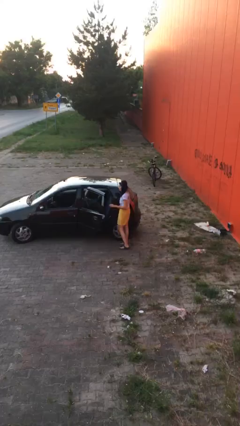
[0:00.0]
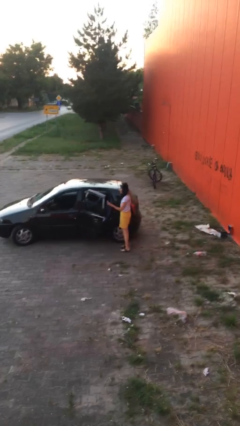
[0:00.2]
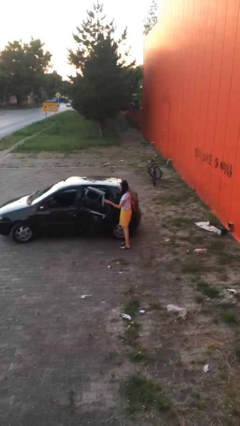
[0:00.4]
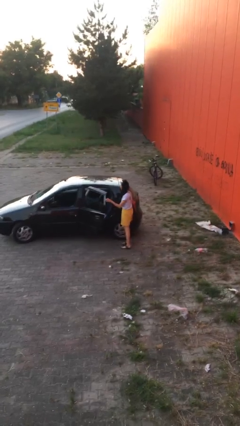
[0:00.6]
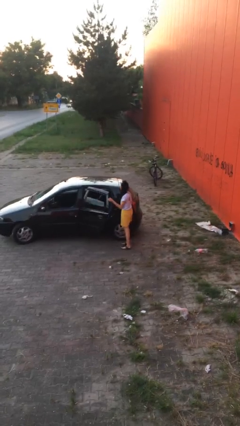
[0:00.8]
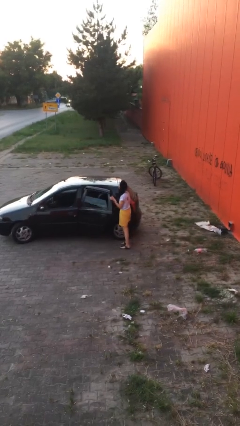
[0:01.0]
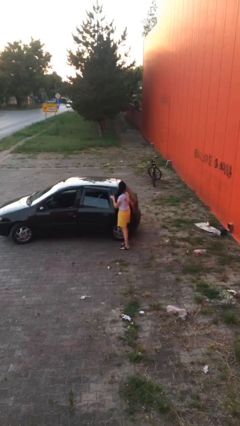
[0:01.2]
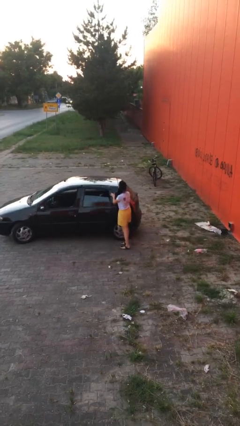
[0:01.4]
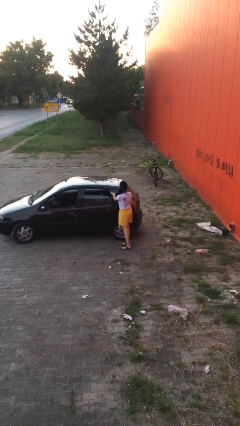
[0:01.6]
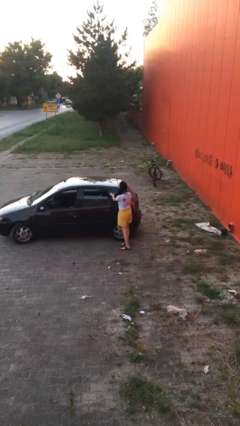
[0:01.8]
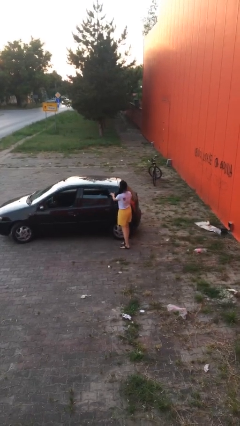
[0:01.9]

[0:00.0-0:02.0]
person closes car door

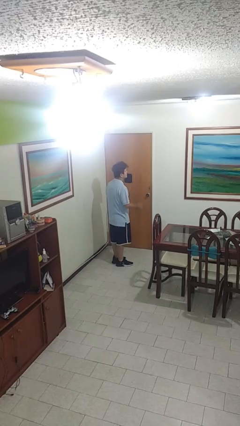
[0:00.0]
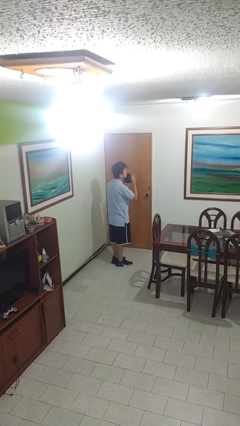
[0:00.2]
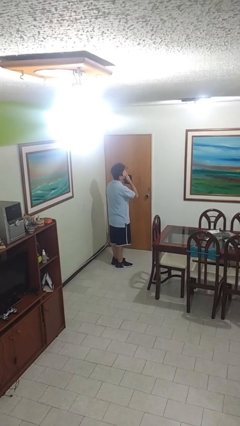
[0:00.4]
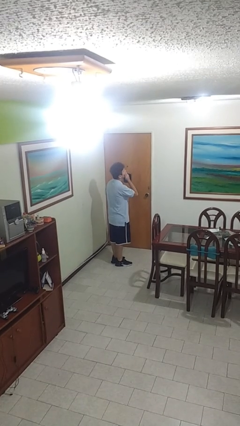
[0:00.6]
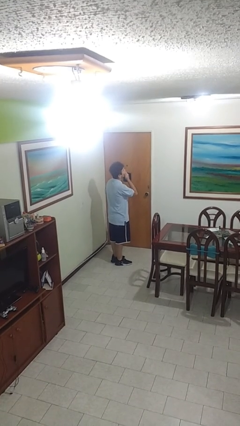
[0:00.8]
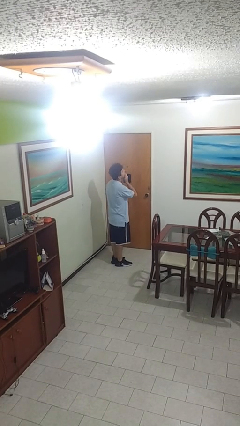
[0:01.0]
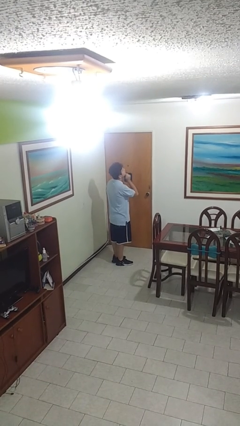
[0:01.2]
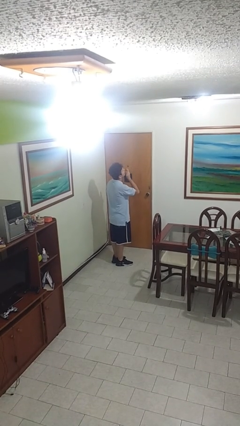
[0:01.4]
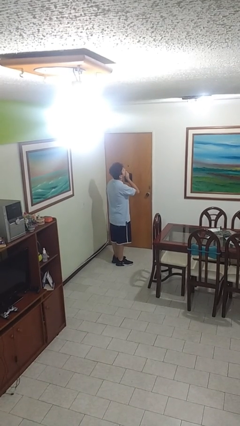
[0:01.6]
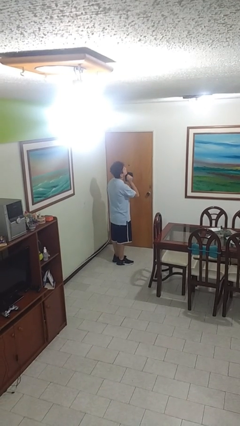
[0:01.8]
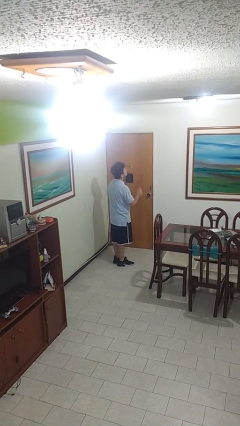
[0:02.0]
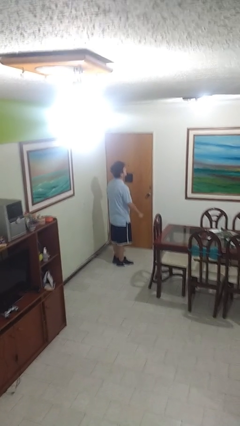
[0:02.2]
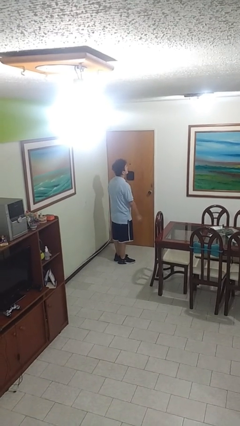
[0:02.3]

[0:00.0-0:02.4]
person strokes chin

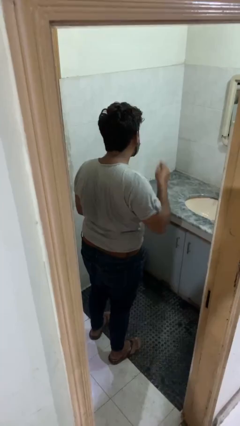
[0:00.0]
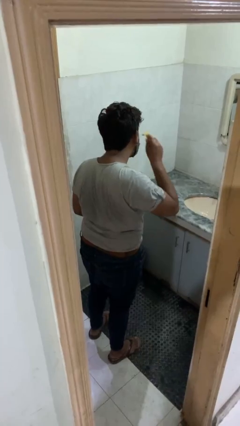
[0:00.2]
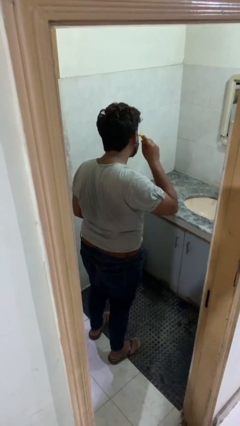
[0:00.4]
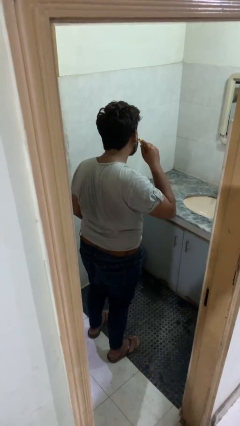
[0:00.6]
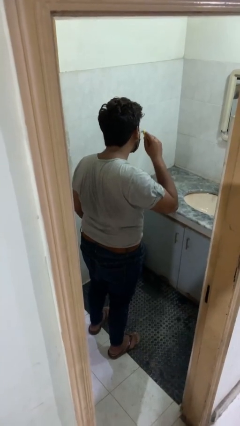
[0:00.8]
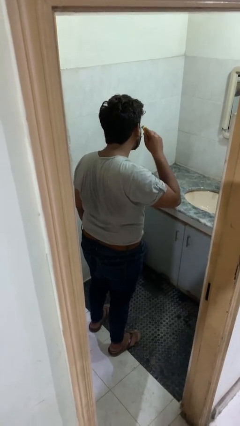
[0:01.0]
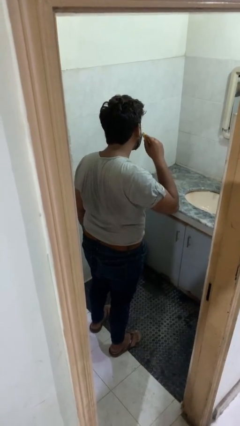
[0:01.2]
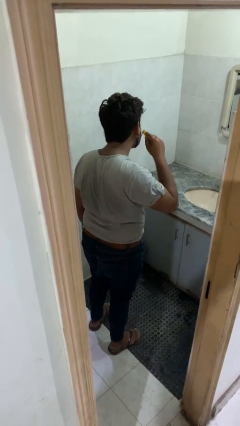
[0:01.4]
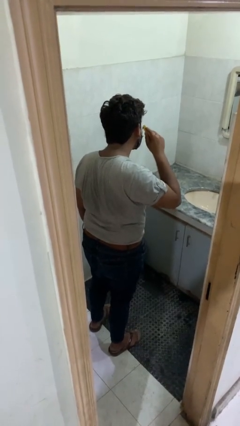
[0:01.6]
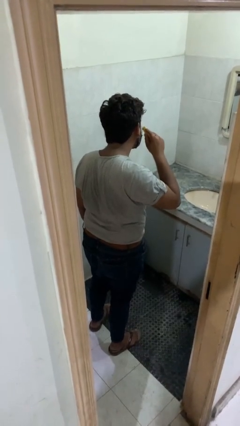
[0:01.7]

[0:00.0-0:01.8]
person shaves face

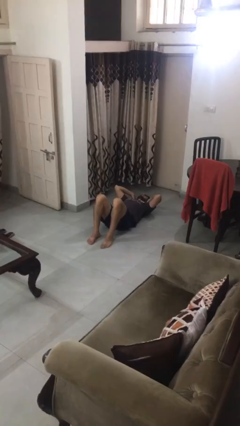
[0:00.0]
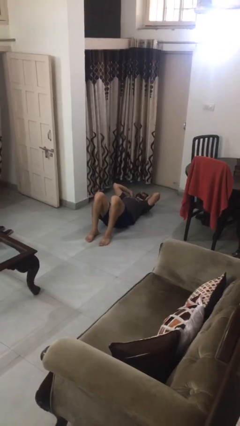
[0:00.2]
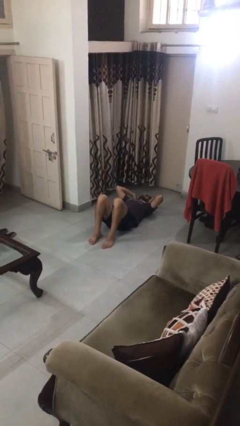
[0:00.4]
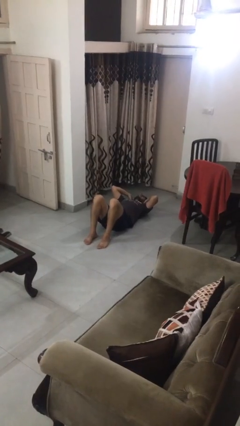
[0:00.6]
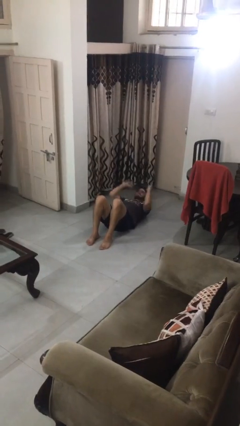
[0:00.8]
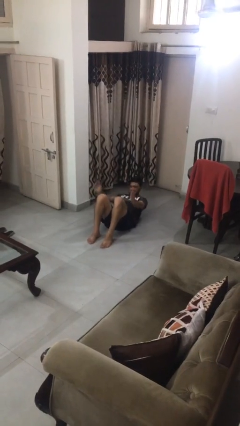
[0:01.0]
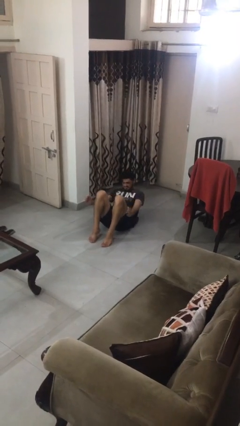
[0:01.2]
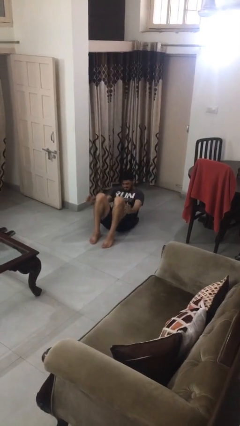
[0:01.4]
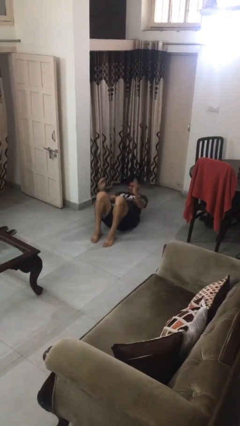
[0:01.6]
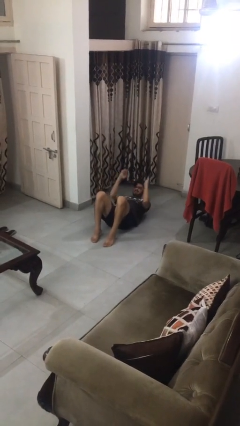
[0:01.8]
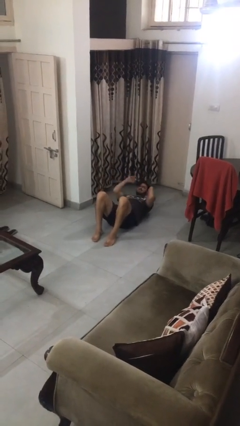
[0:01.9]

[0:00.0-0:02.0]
person exercises with situp

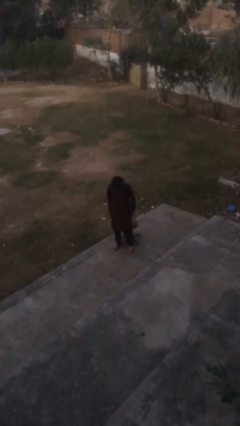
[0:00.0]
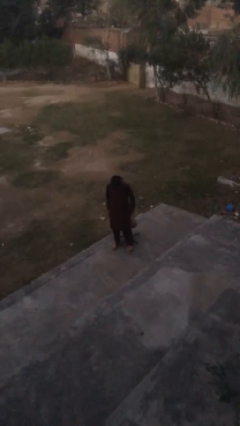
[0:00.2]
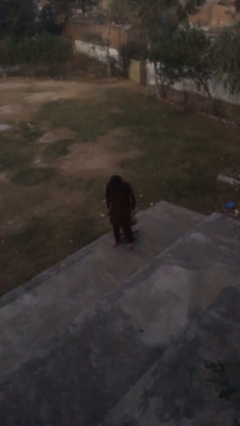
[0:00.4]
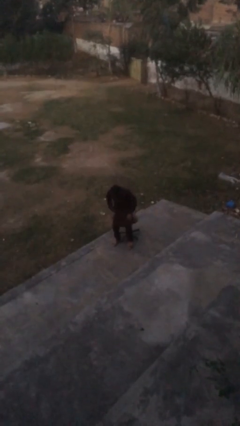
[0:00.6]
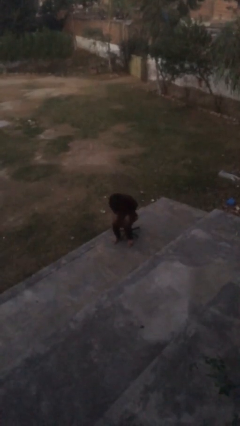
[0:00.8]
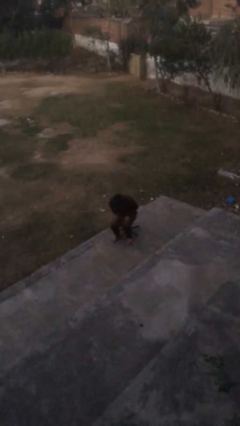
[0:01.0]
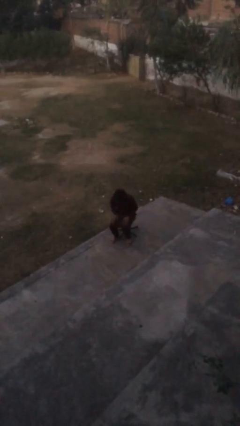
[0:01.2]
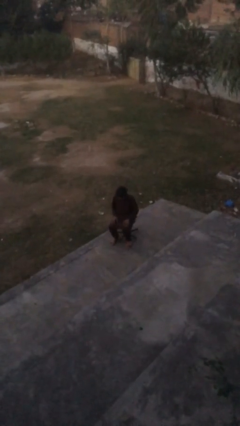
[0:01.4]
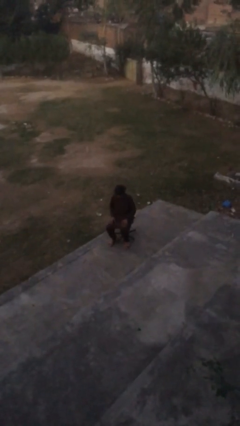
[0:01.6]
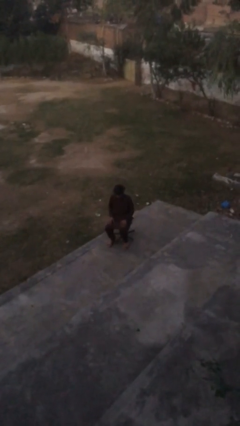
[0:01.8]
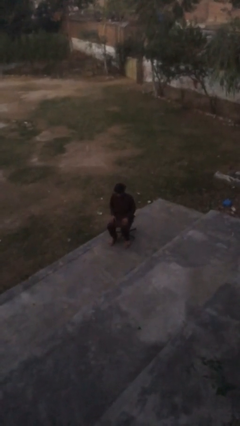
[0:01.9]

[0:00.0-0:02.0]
person sits down

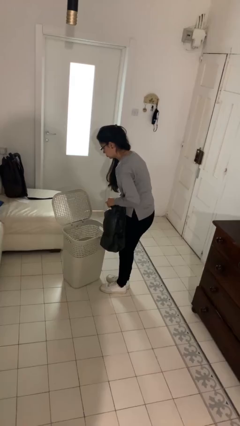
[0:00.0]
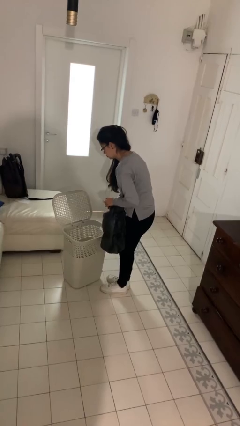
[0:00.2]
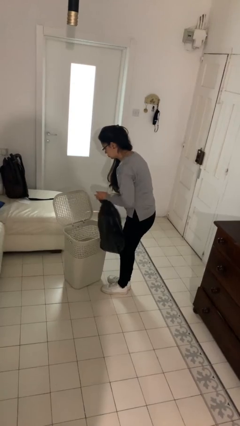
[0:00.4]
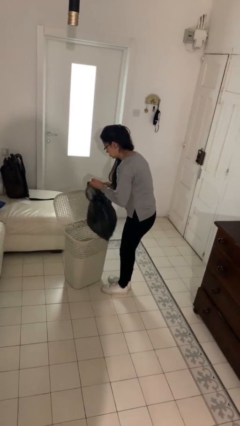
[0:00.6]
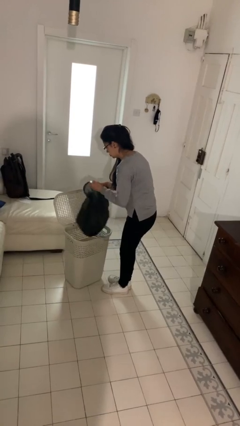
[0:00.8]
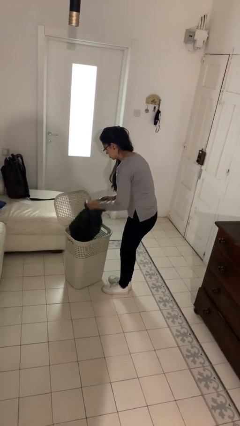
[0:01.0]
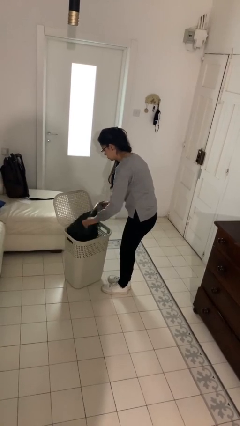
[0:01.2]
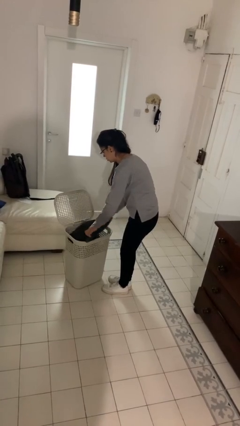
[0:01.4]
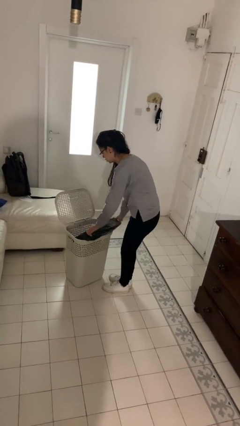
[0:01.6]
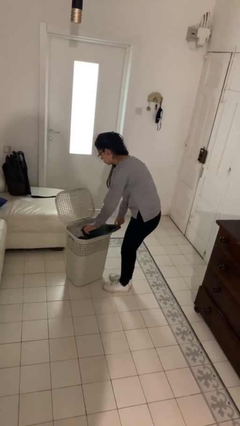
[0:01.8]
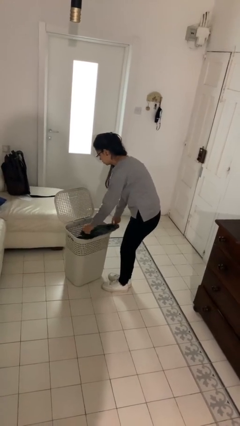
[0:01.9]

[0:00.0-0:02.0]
person inserts trashbag into trashcan

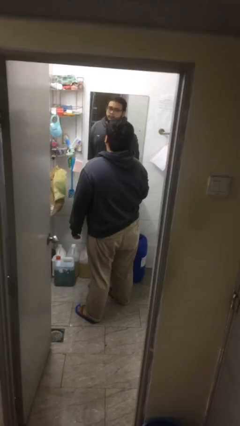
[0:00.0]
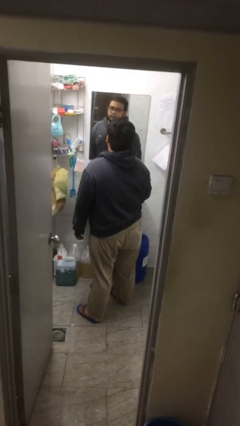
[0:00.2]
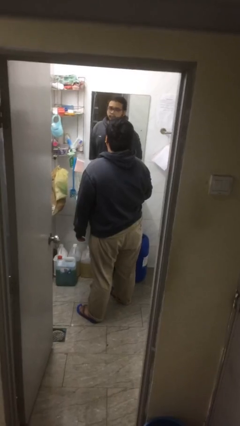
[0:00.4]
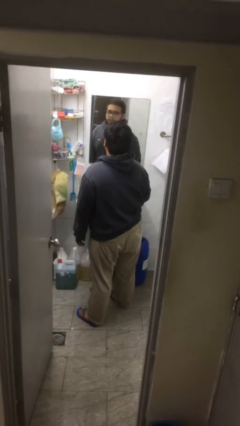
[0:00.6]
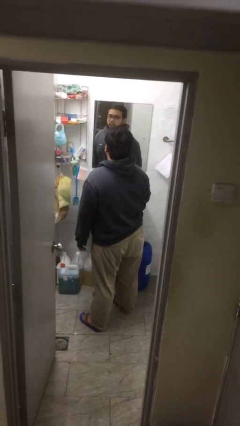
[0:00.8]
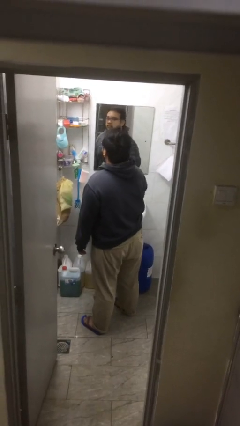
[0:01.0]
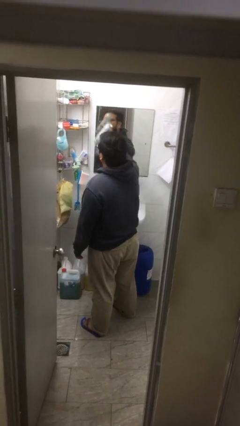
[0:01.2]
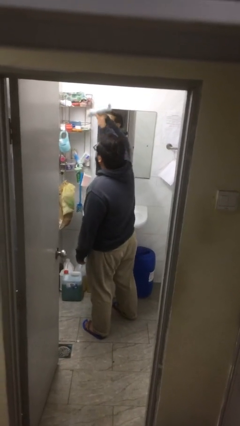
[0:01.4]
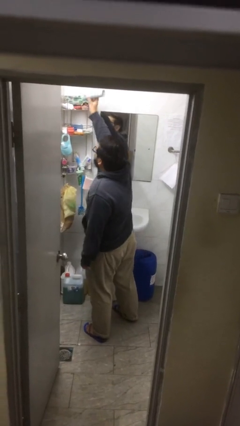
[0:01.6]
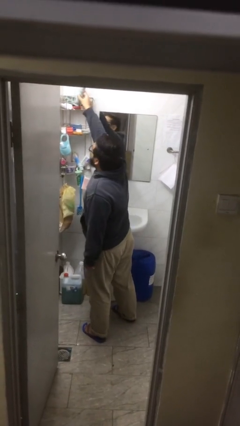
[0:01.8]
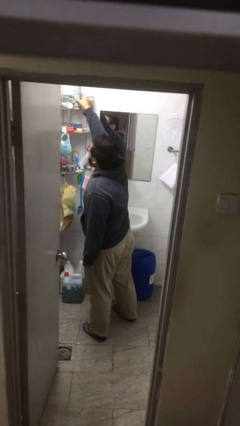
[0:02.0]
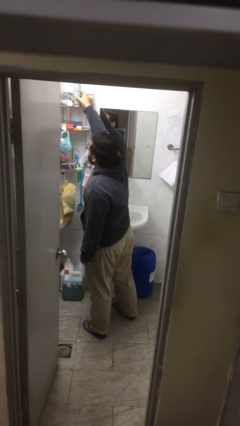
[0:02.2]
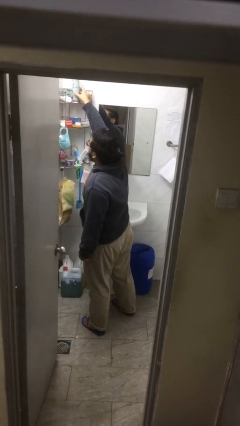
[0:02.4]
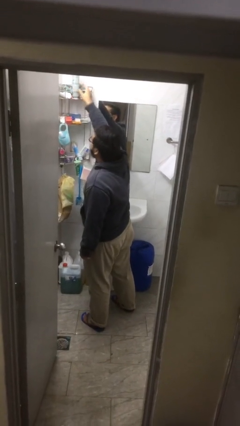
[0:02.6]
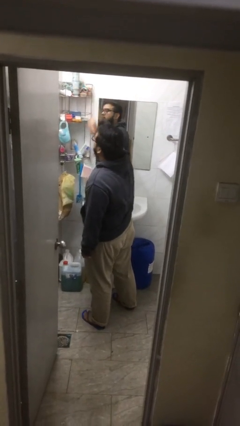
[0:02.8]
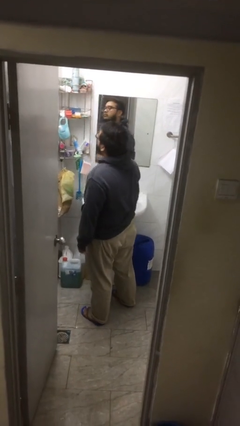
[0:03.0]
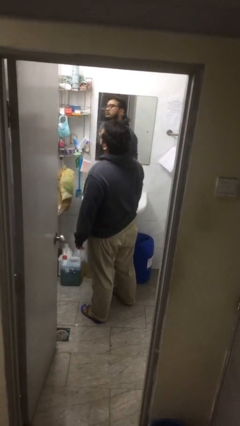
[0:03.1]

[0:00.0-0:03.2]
person puts down object on countertop

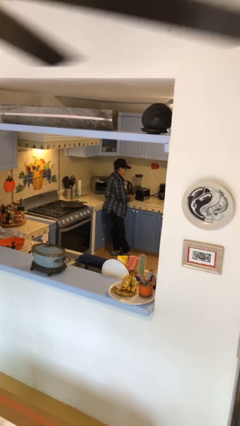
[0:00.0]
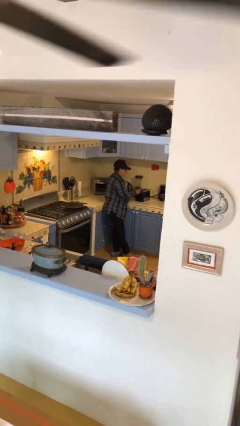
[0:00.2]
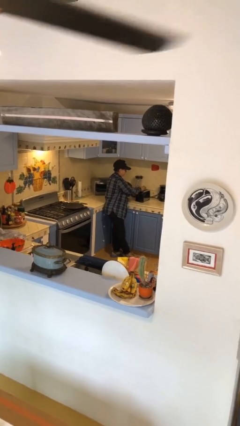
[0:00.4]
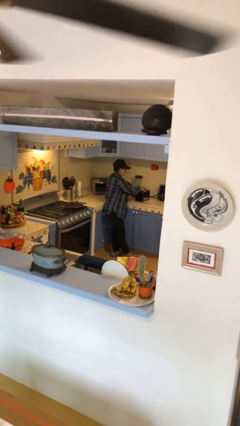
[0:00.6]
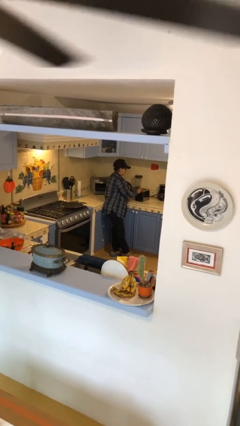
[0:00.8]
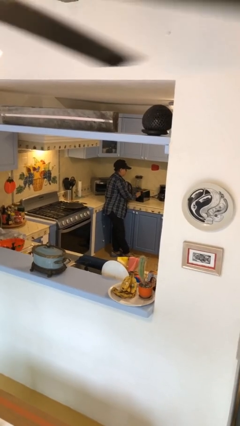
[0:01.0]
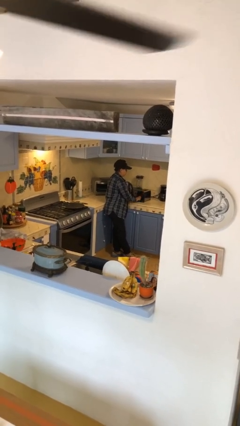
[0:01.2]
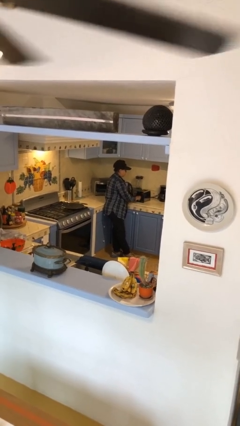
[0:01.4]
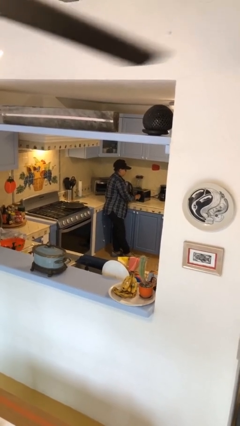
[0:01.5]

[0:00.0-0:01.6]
person puts object into toaster
